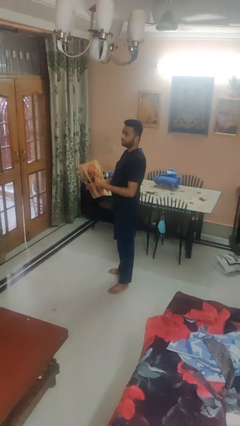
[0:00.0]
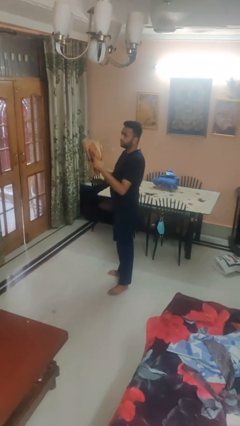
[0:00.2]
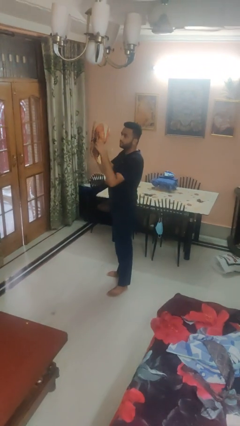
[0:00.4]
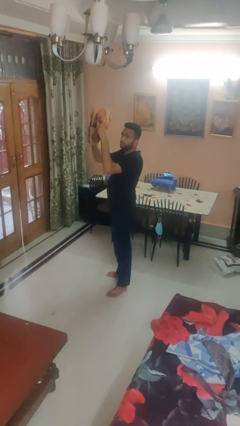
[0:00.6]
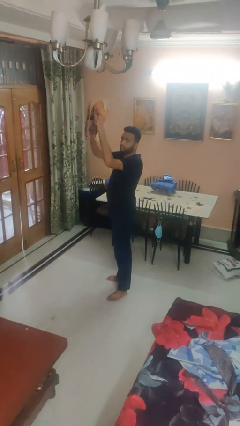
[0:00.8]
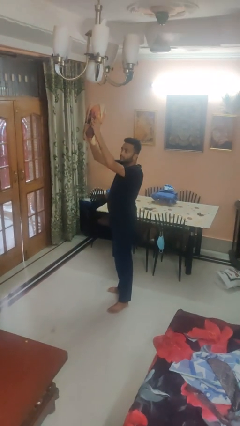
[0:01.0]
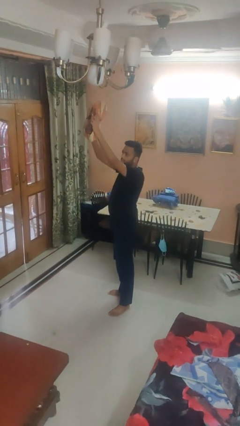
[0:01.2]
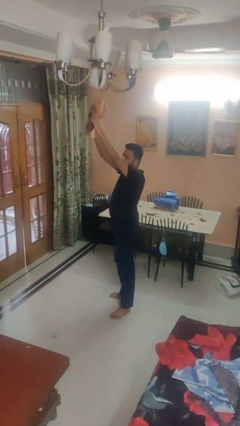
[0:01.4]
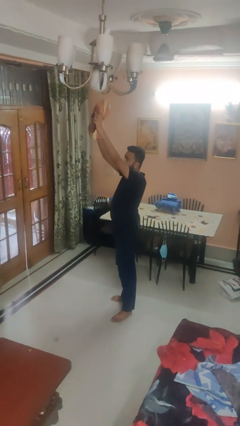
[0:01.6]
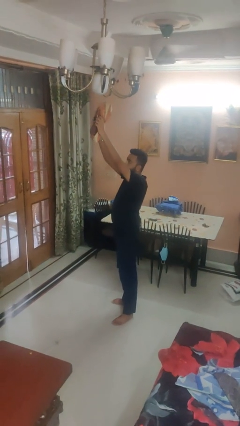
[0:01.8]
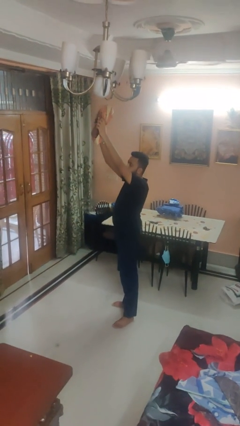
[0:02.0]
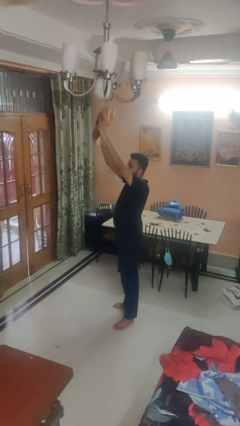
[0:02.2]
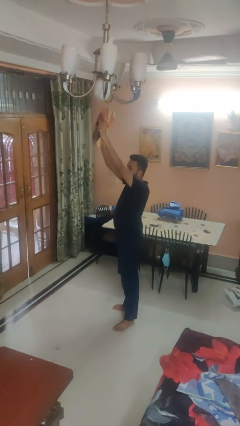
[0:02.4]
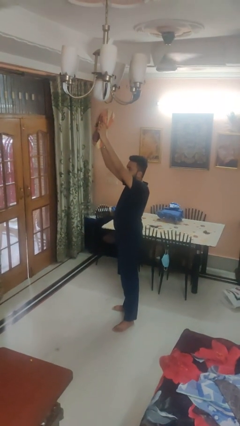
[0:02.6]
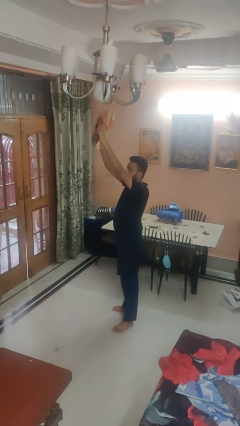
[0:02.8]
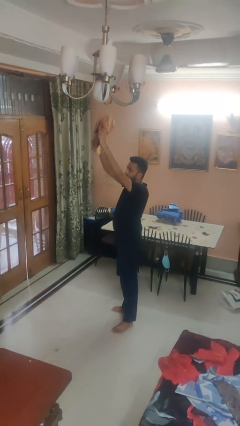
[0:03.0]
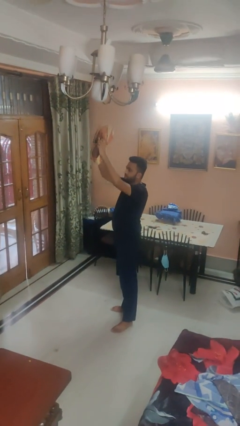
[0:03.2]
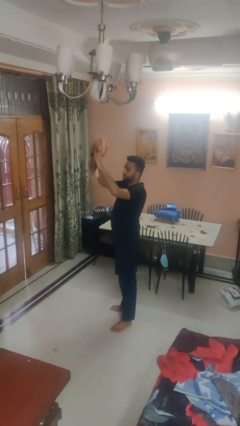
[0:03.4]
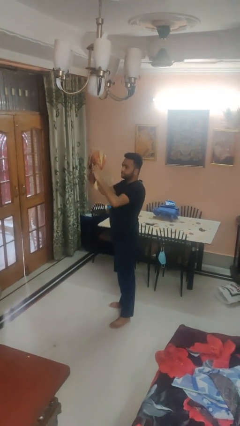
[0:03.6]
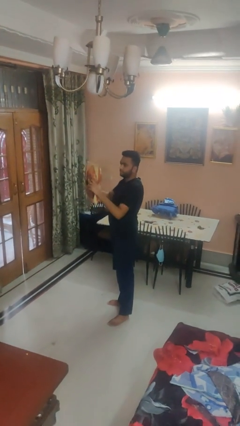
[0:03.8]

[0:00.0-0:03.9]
person holds object above head

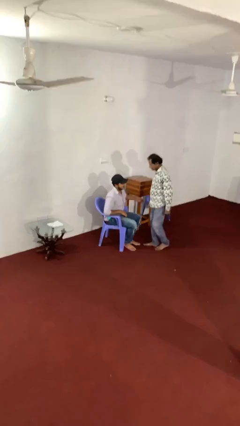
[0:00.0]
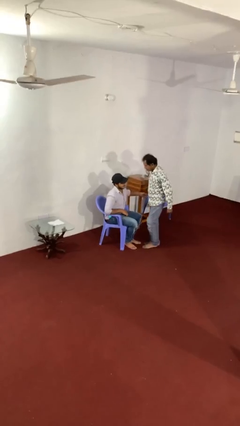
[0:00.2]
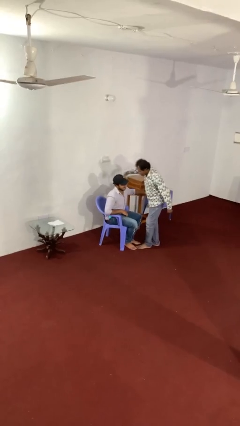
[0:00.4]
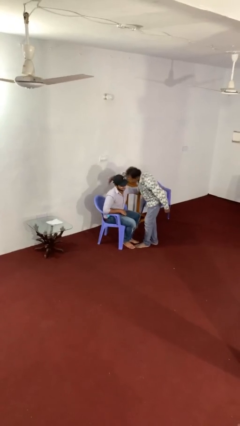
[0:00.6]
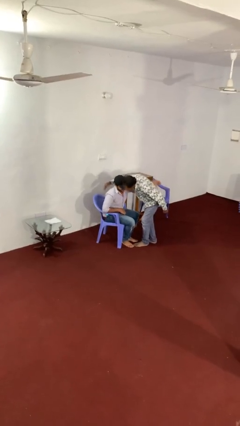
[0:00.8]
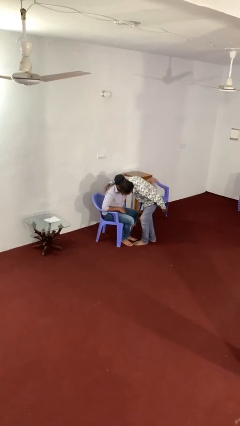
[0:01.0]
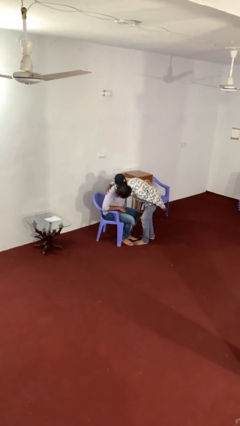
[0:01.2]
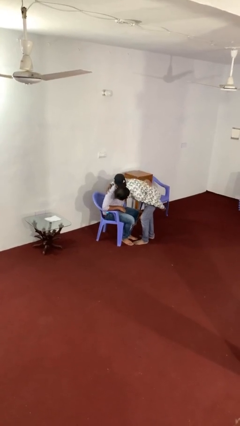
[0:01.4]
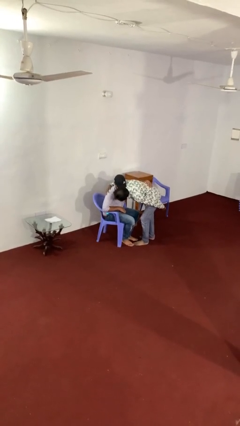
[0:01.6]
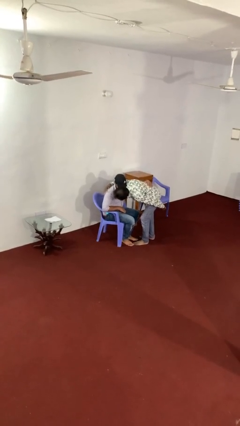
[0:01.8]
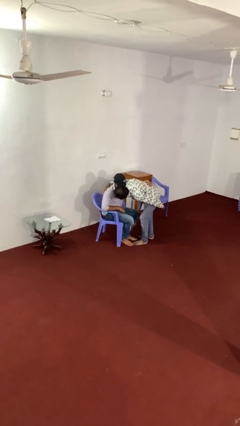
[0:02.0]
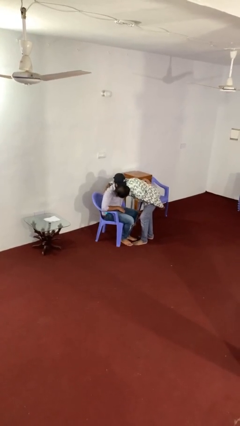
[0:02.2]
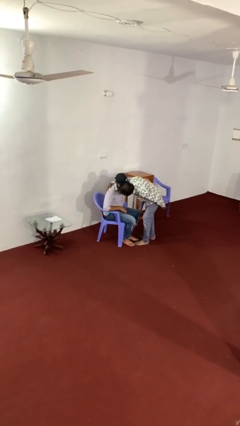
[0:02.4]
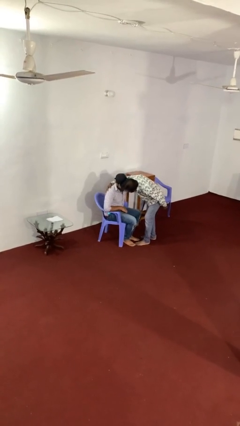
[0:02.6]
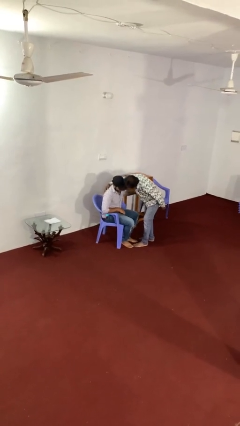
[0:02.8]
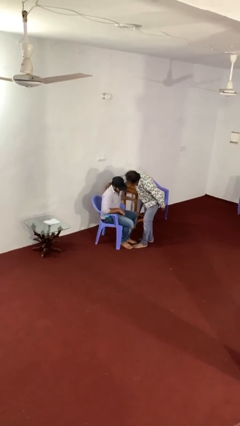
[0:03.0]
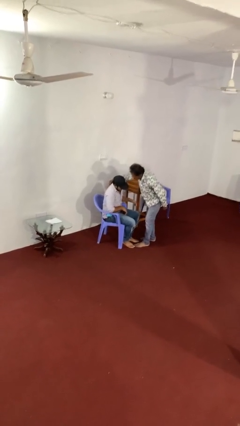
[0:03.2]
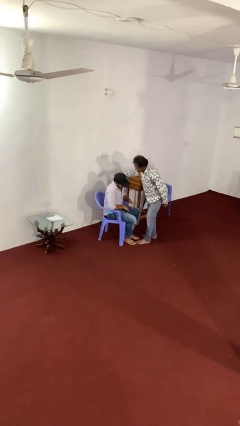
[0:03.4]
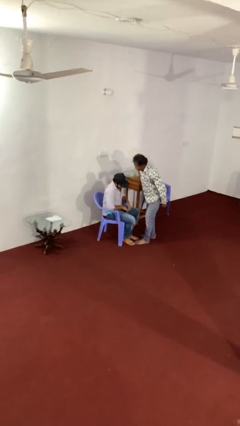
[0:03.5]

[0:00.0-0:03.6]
person embraces person

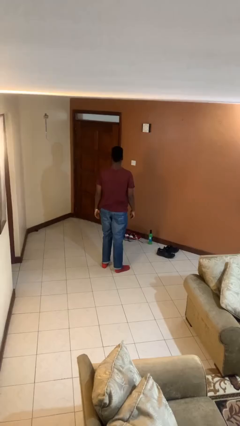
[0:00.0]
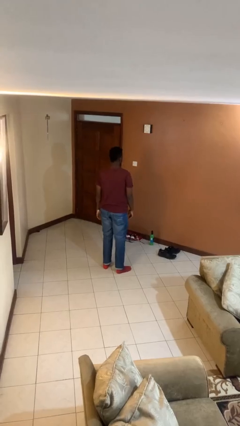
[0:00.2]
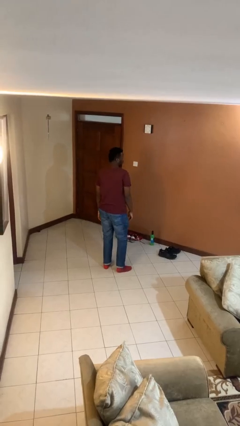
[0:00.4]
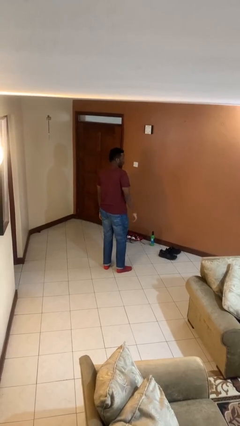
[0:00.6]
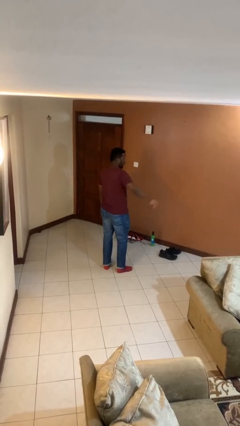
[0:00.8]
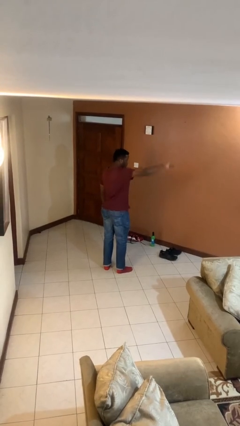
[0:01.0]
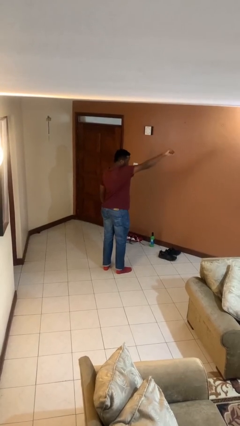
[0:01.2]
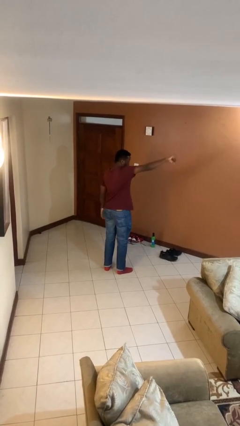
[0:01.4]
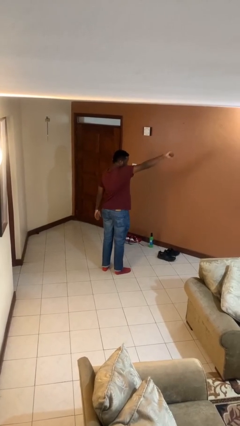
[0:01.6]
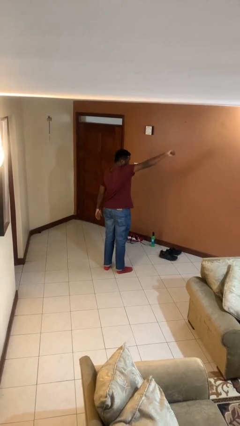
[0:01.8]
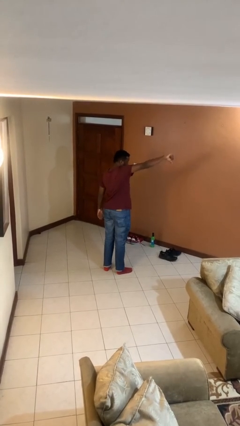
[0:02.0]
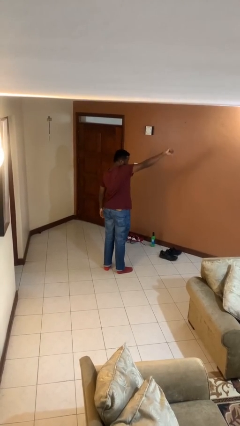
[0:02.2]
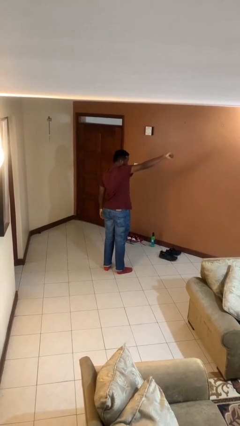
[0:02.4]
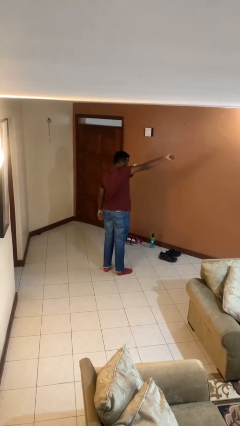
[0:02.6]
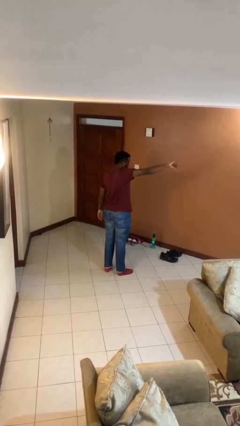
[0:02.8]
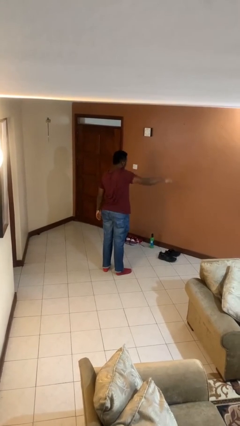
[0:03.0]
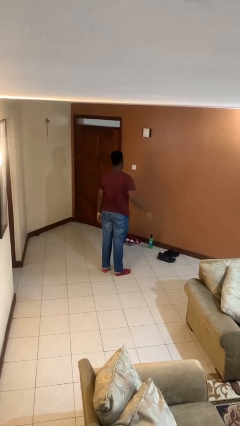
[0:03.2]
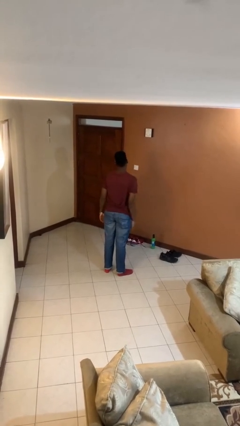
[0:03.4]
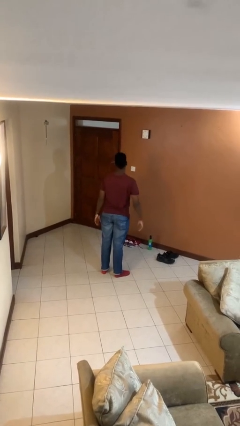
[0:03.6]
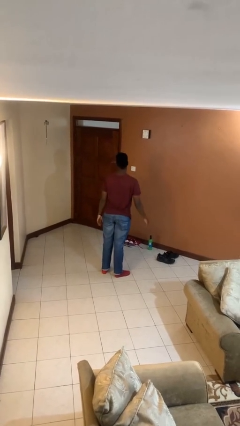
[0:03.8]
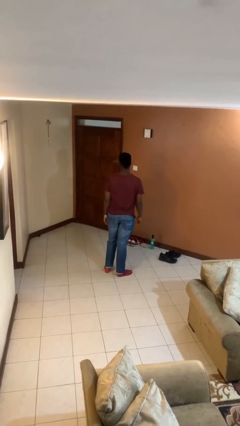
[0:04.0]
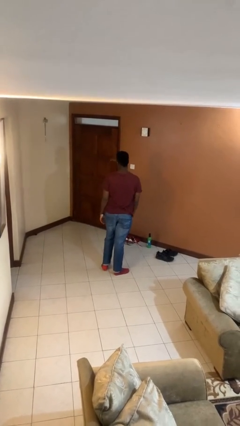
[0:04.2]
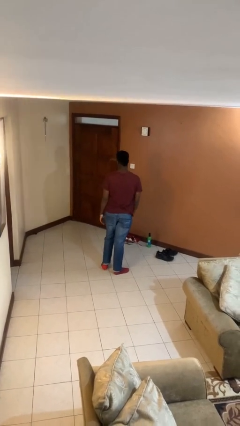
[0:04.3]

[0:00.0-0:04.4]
person gestures thumbs down

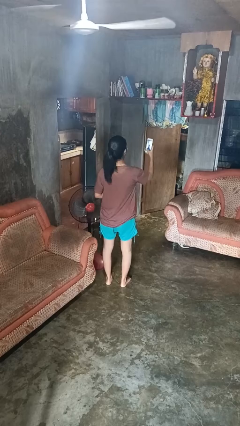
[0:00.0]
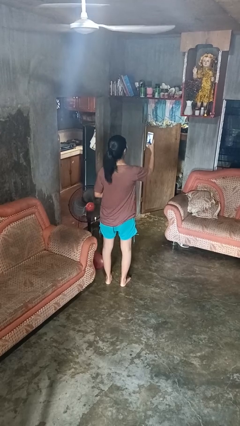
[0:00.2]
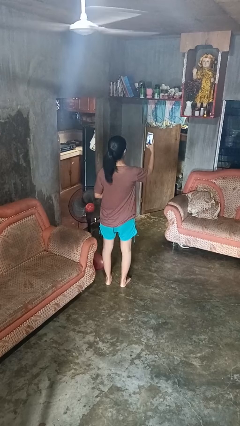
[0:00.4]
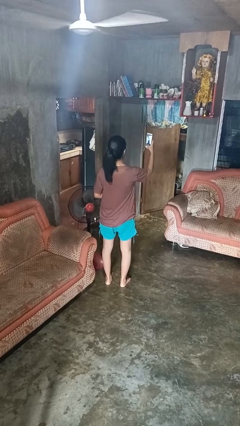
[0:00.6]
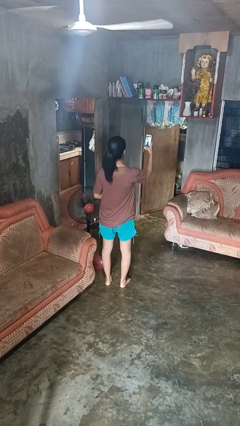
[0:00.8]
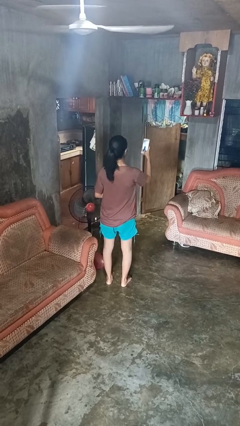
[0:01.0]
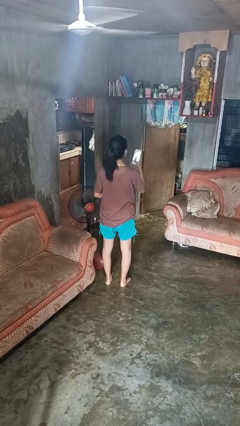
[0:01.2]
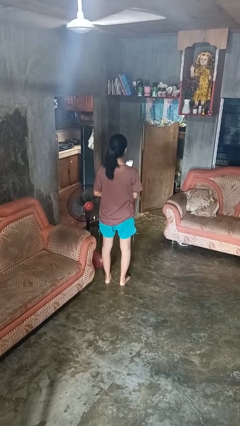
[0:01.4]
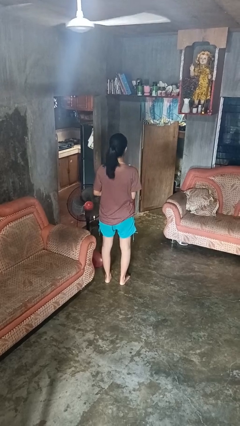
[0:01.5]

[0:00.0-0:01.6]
person takes selfie

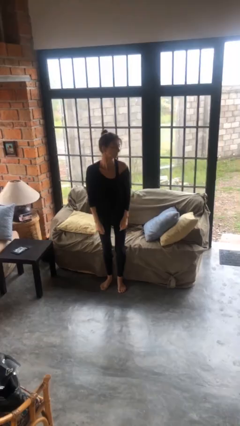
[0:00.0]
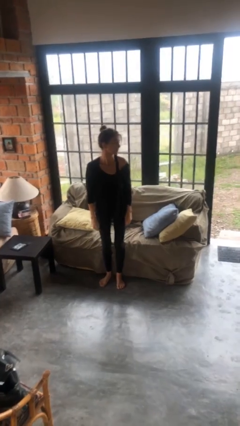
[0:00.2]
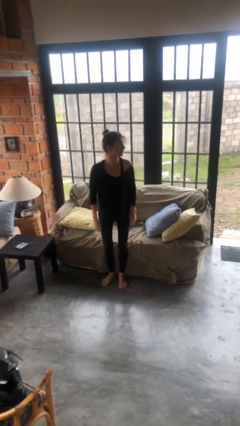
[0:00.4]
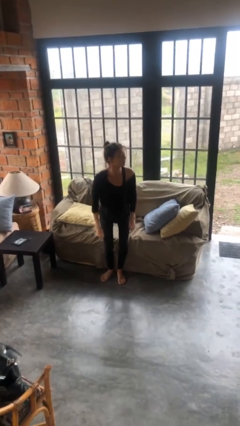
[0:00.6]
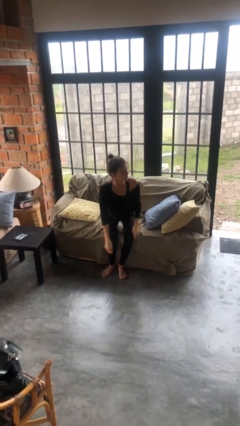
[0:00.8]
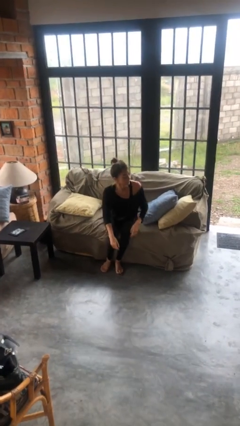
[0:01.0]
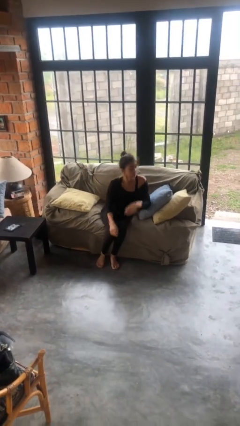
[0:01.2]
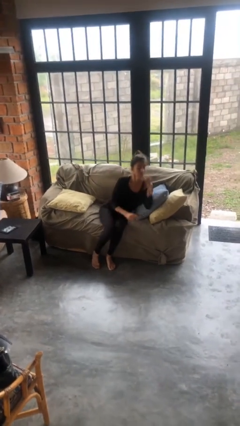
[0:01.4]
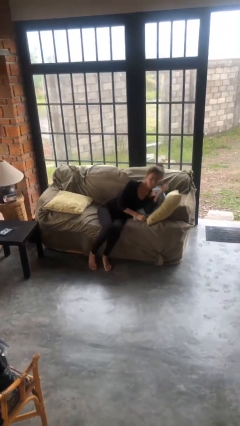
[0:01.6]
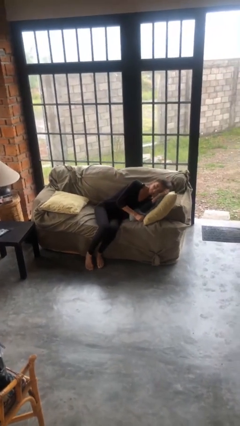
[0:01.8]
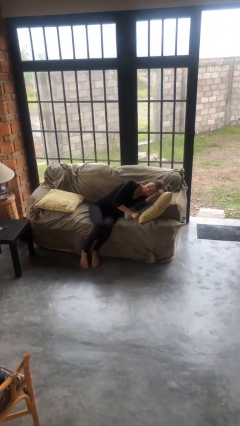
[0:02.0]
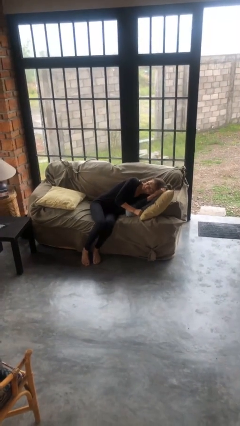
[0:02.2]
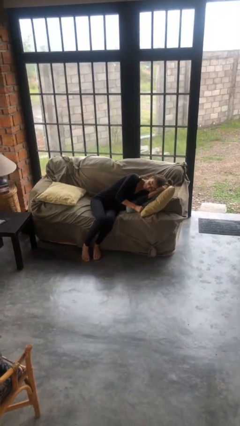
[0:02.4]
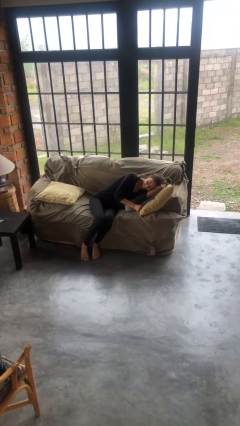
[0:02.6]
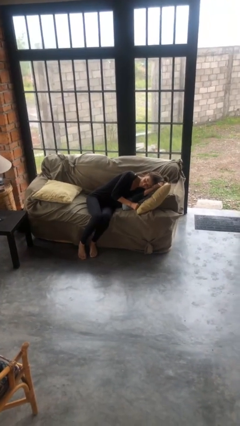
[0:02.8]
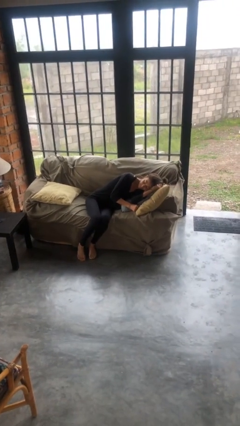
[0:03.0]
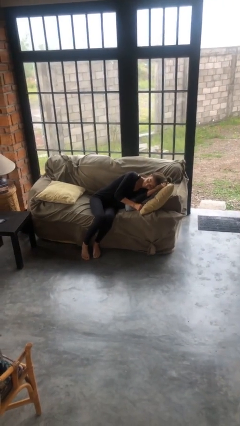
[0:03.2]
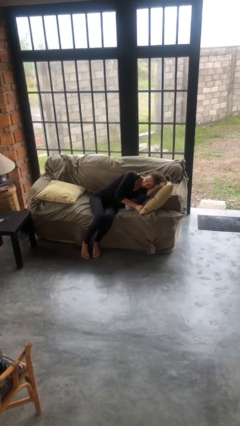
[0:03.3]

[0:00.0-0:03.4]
person lies down on couch

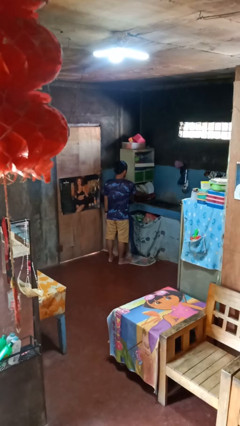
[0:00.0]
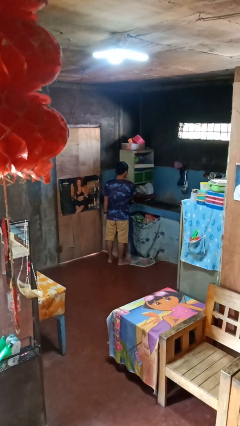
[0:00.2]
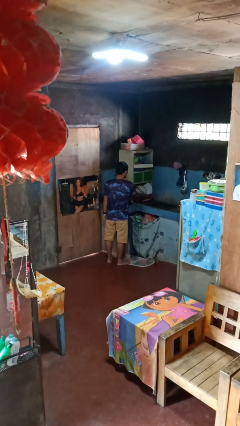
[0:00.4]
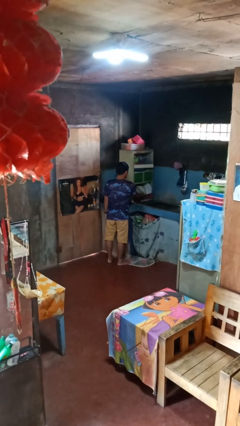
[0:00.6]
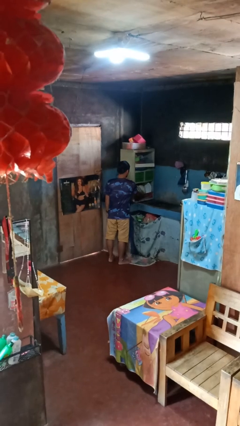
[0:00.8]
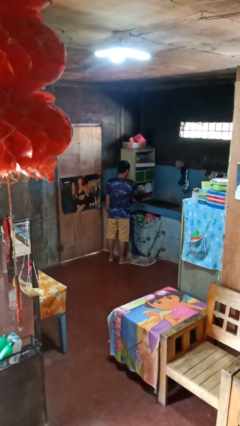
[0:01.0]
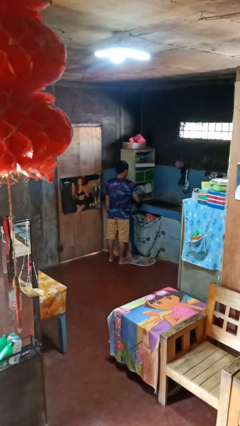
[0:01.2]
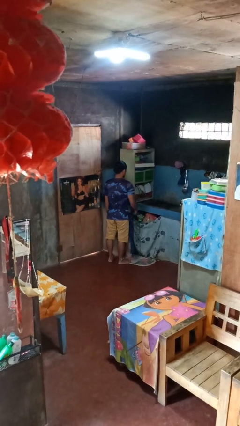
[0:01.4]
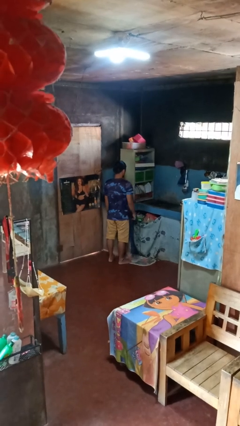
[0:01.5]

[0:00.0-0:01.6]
person closes dishwasher
